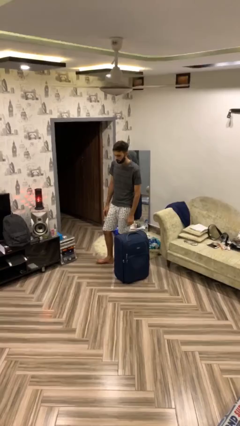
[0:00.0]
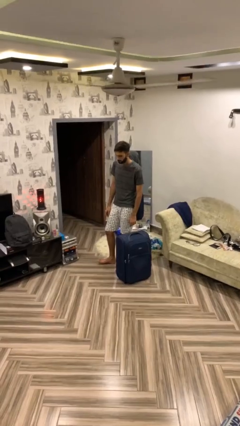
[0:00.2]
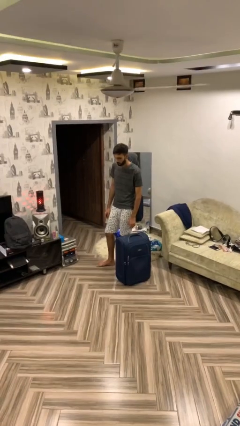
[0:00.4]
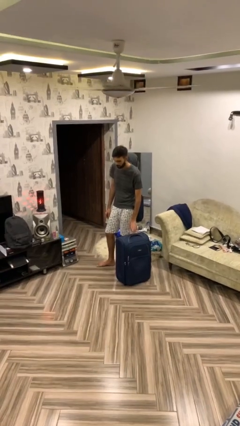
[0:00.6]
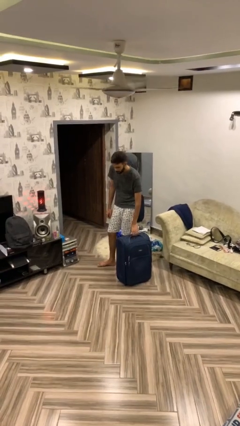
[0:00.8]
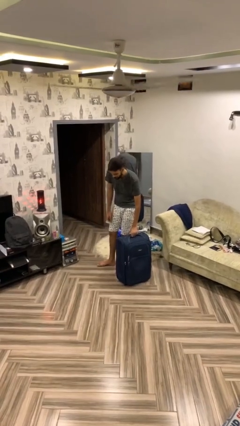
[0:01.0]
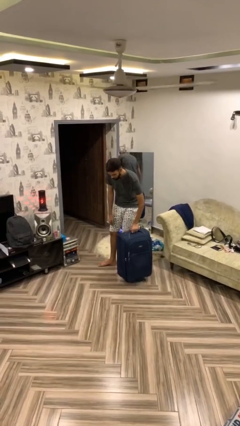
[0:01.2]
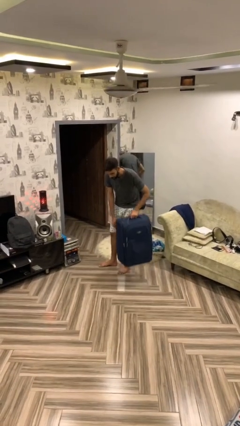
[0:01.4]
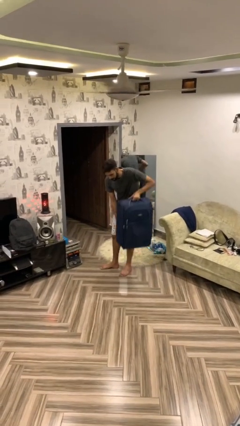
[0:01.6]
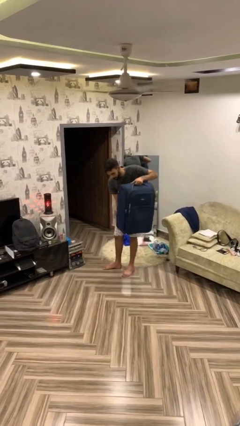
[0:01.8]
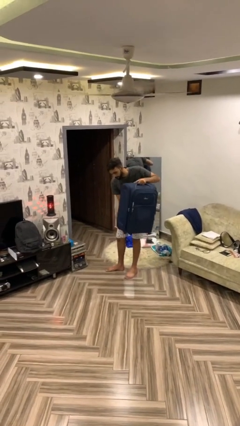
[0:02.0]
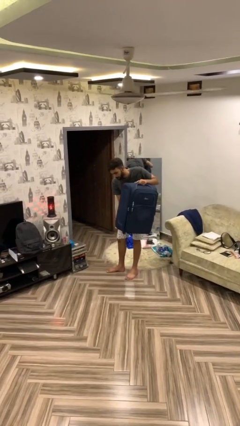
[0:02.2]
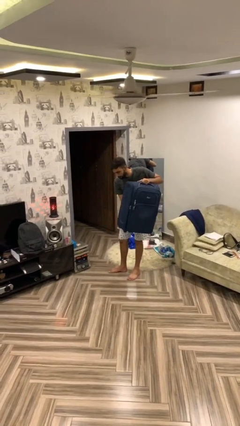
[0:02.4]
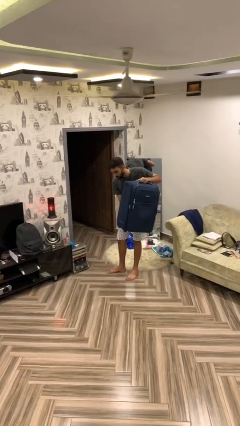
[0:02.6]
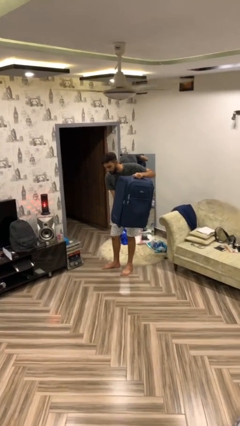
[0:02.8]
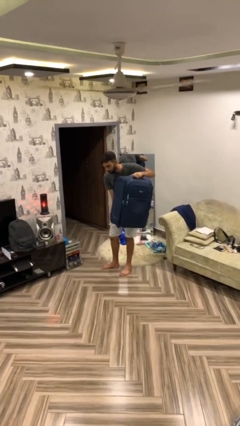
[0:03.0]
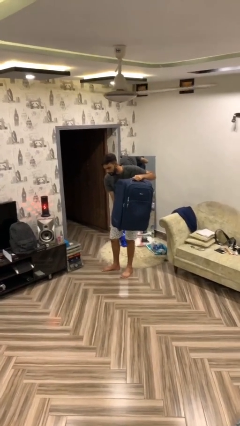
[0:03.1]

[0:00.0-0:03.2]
person picks up object from floor

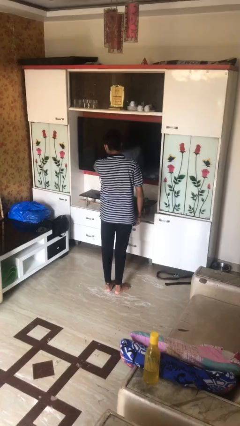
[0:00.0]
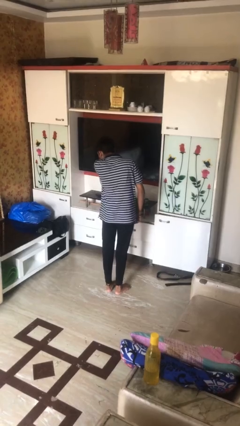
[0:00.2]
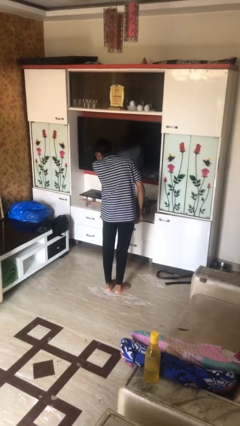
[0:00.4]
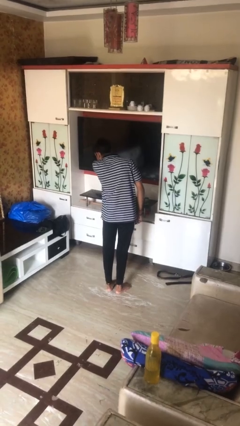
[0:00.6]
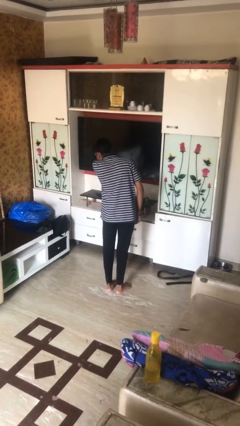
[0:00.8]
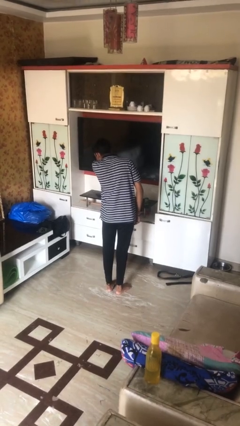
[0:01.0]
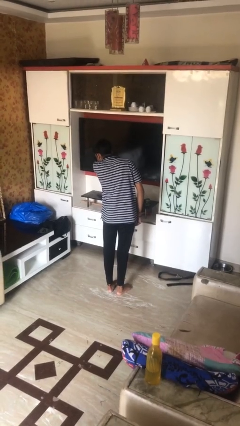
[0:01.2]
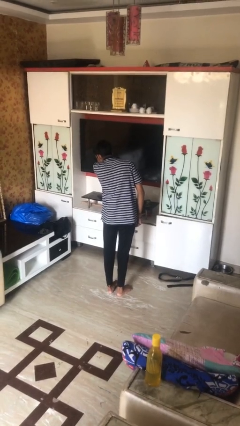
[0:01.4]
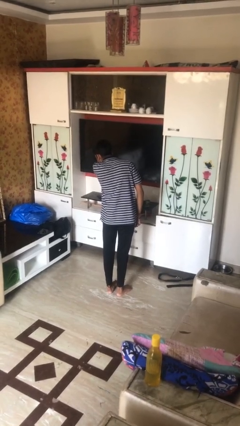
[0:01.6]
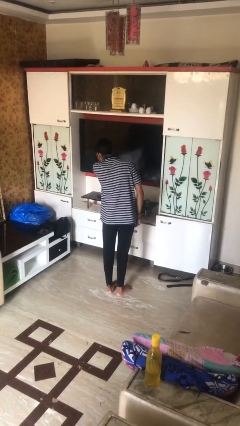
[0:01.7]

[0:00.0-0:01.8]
person sneezes into arm

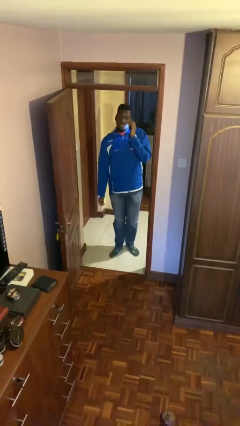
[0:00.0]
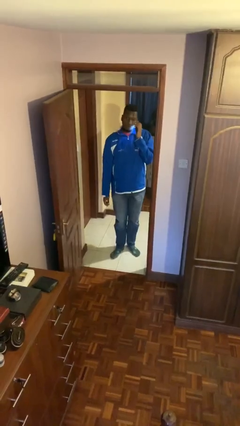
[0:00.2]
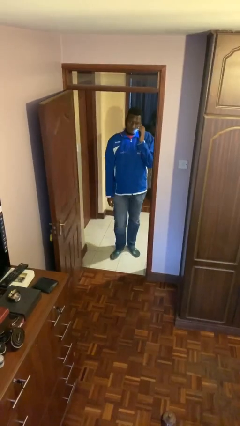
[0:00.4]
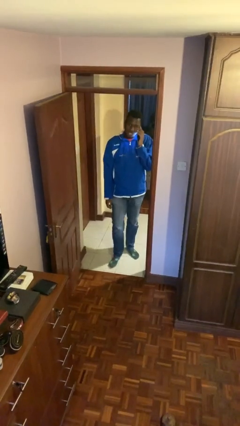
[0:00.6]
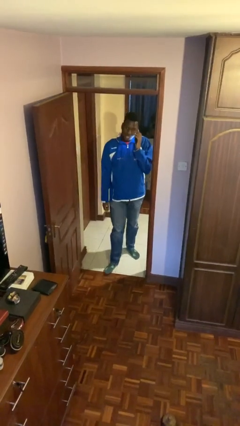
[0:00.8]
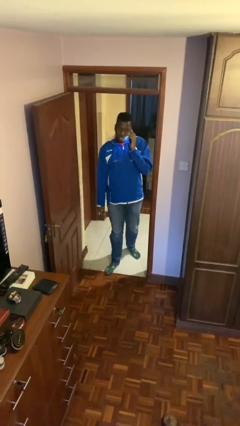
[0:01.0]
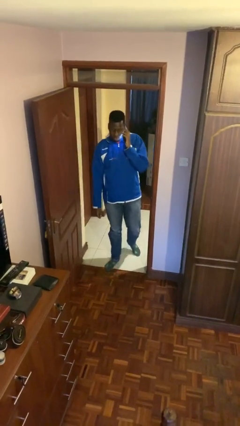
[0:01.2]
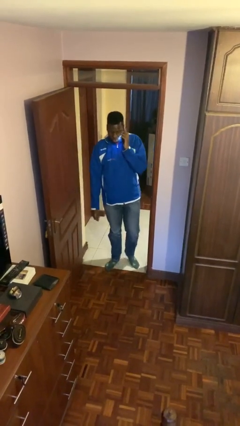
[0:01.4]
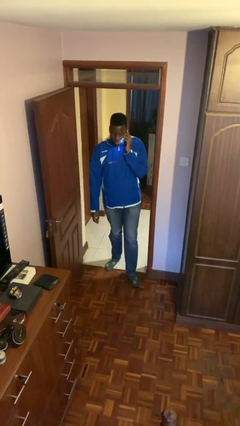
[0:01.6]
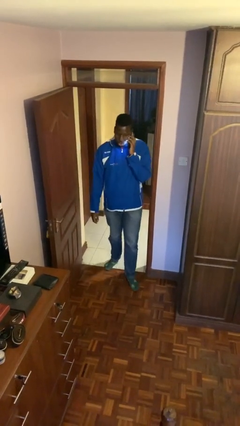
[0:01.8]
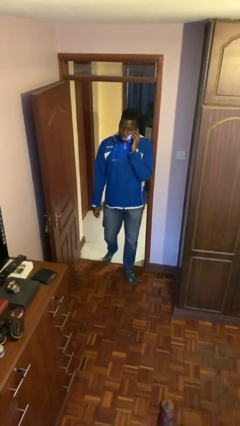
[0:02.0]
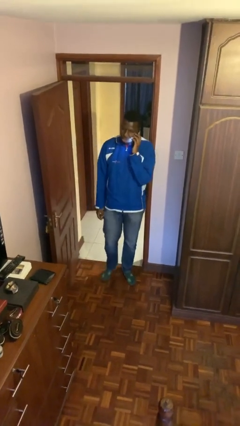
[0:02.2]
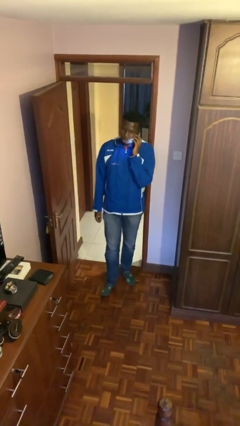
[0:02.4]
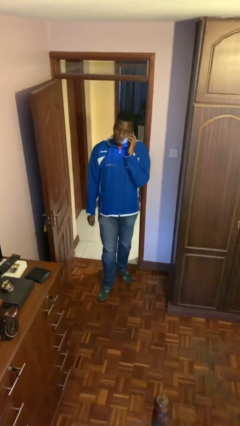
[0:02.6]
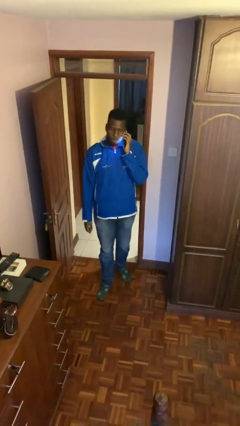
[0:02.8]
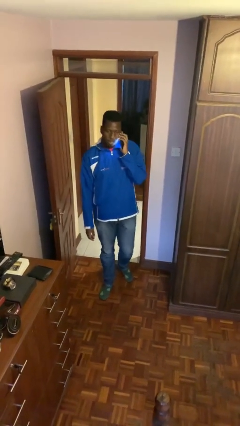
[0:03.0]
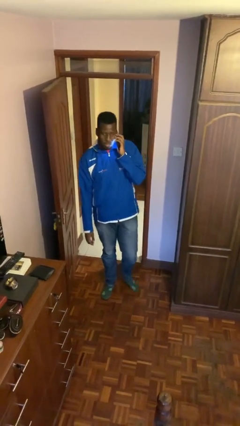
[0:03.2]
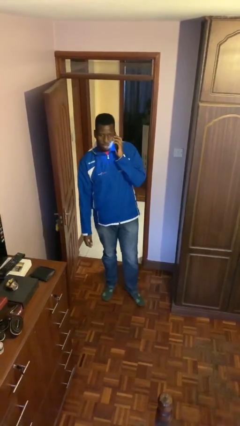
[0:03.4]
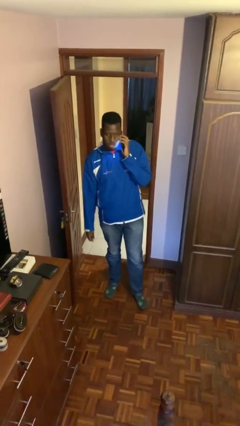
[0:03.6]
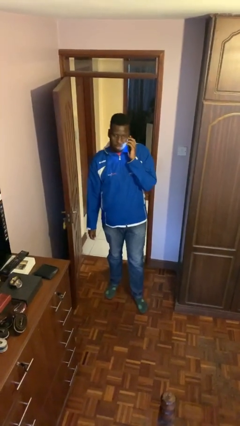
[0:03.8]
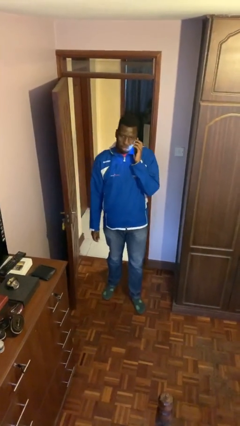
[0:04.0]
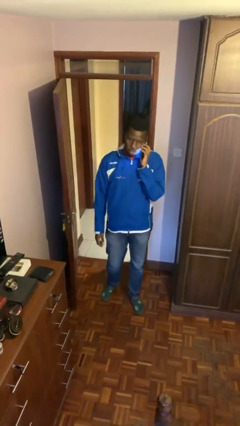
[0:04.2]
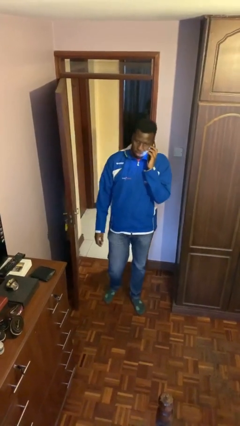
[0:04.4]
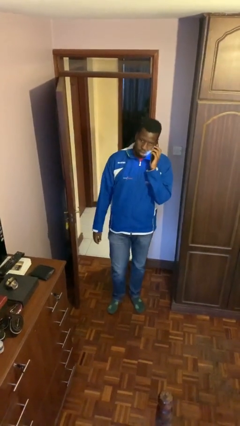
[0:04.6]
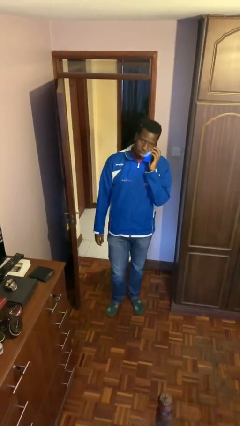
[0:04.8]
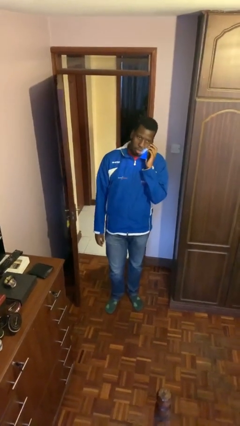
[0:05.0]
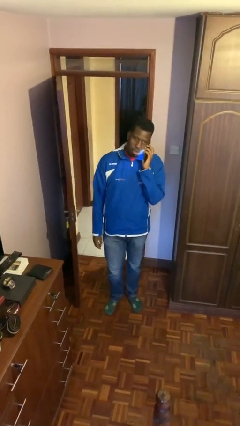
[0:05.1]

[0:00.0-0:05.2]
person enters scene through structure

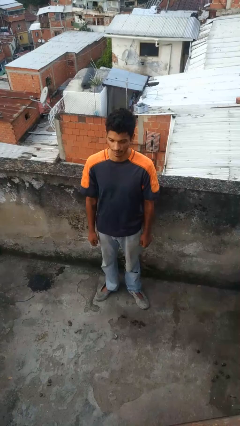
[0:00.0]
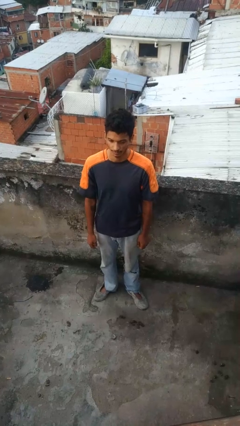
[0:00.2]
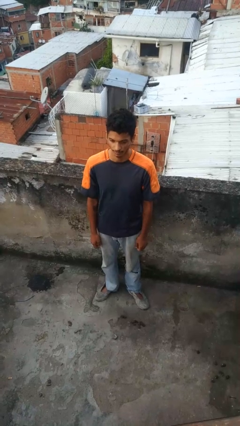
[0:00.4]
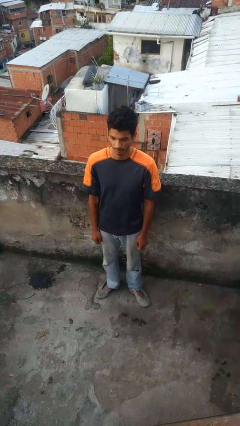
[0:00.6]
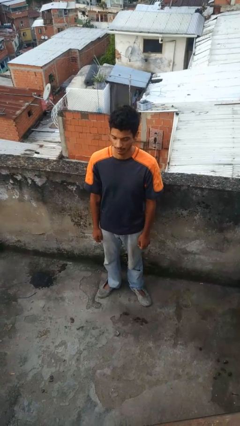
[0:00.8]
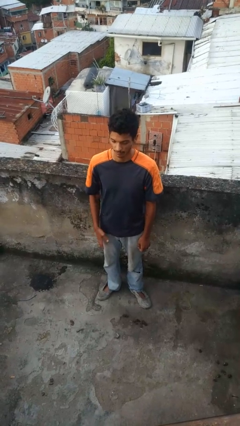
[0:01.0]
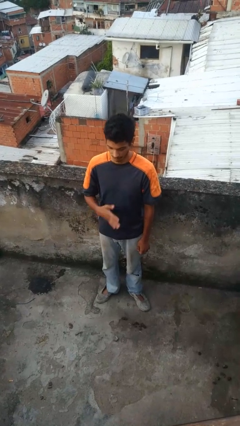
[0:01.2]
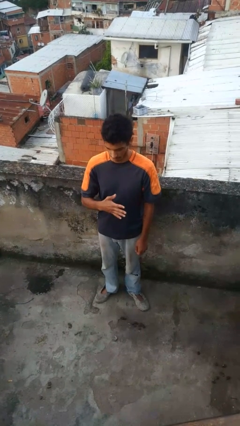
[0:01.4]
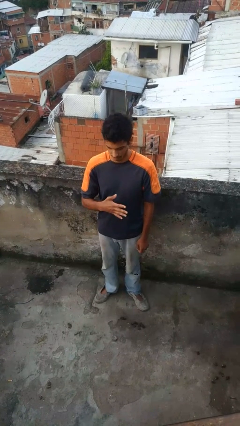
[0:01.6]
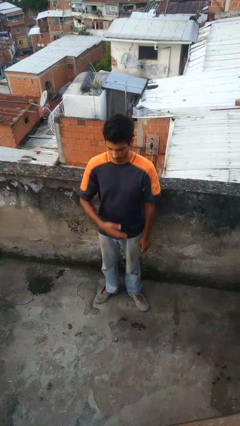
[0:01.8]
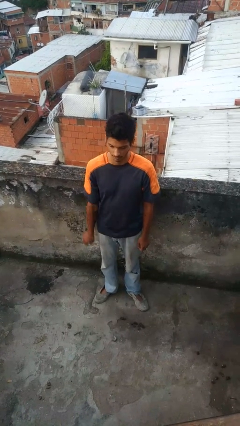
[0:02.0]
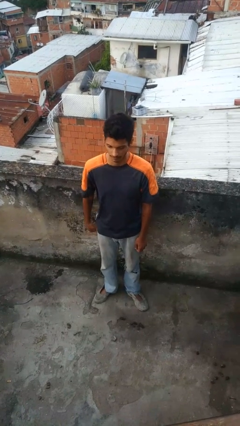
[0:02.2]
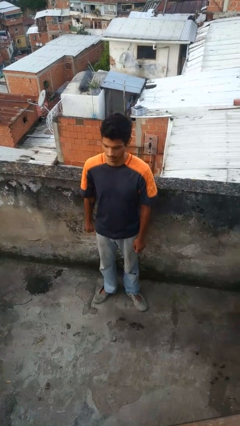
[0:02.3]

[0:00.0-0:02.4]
person gestures number five

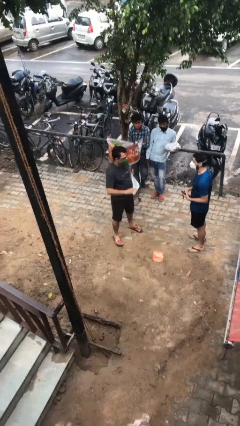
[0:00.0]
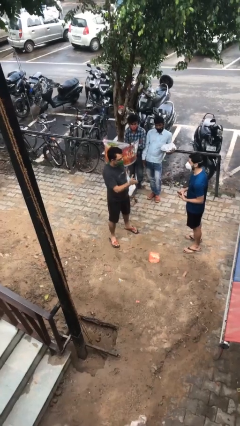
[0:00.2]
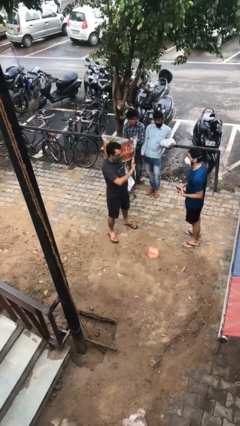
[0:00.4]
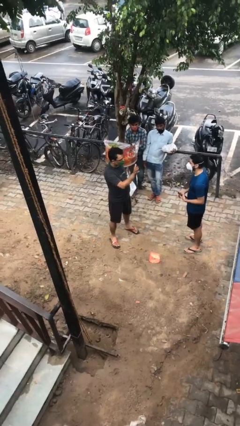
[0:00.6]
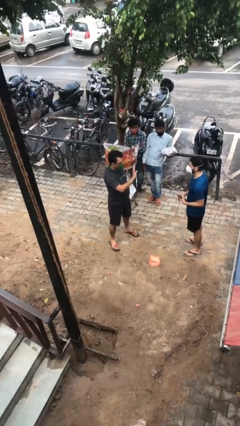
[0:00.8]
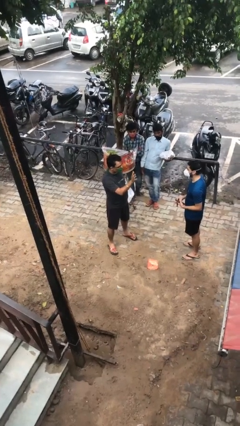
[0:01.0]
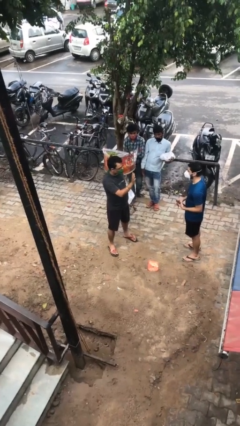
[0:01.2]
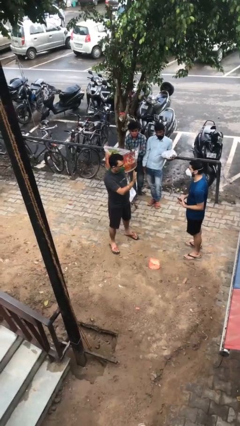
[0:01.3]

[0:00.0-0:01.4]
person waves at person

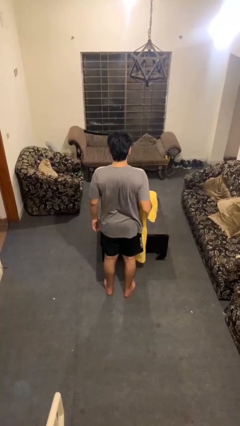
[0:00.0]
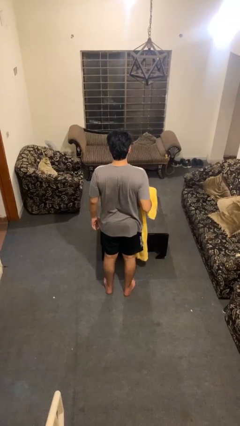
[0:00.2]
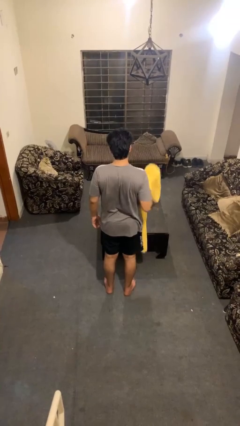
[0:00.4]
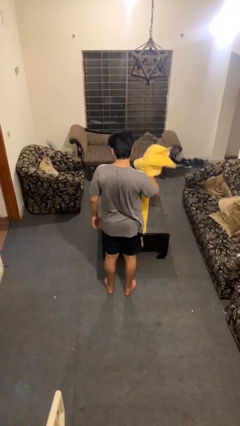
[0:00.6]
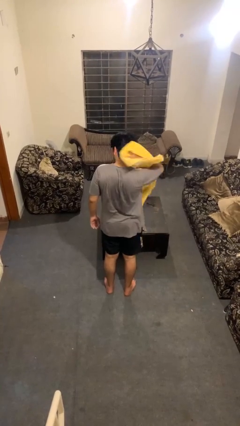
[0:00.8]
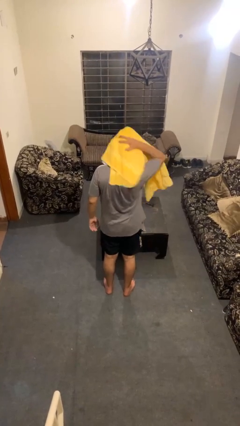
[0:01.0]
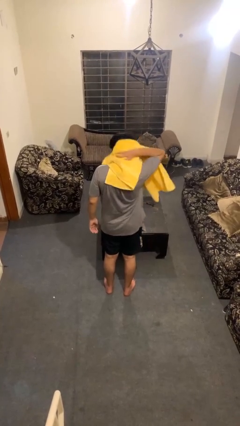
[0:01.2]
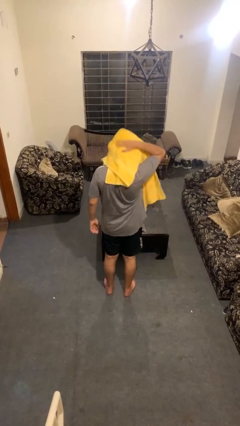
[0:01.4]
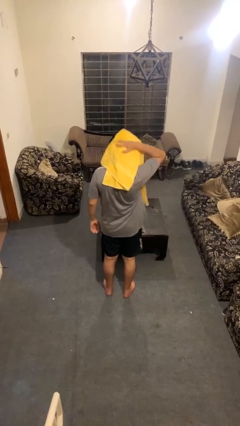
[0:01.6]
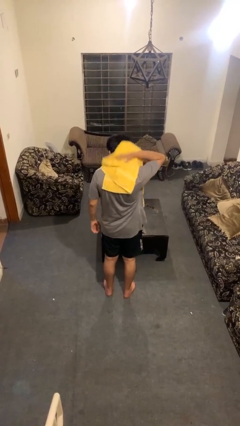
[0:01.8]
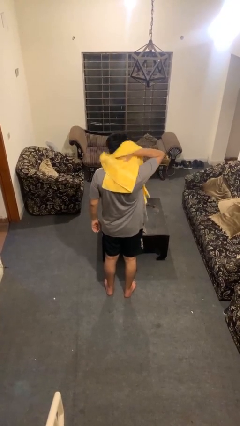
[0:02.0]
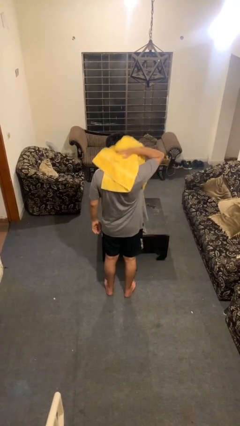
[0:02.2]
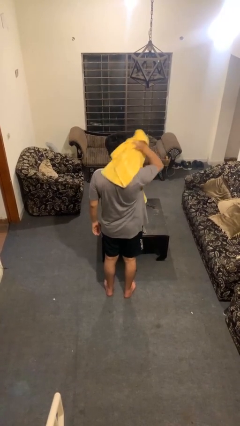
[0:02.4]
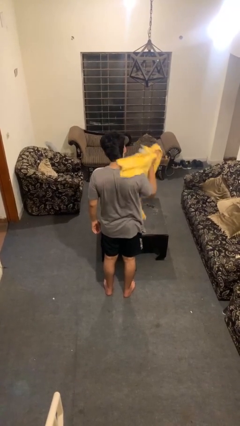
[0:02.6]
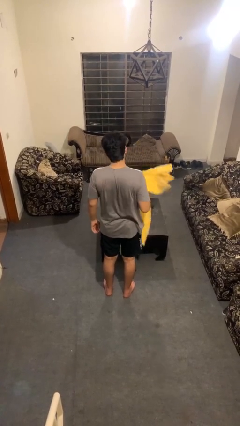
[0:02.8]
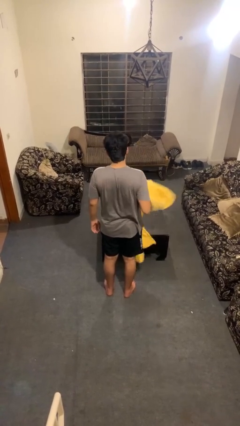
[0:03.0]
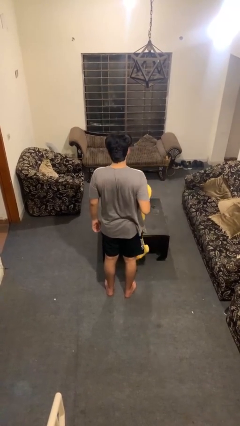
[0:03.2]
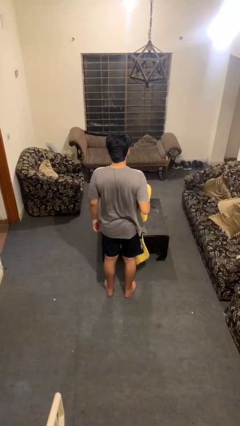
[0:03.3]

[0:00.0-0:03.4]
person dries hair with towel
